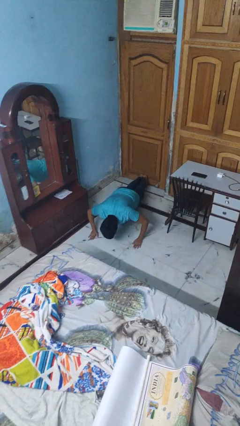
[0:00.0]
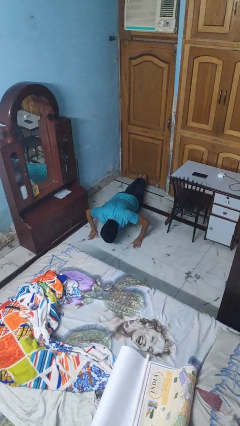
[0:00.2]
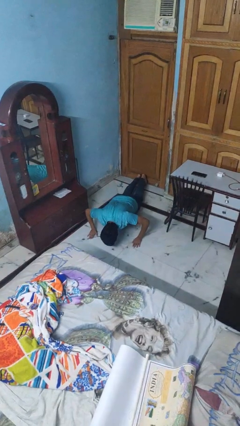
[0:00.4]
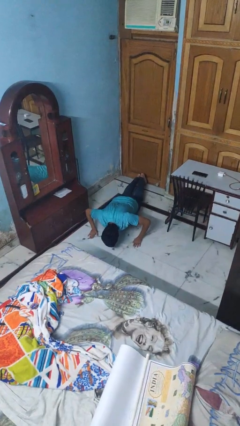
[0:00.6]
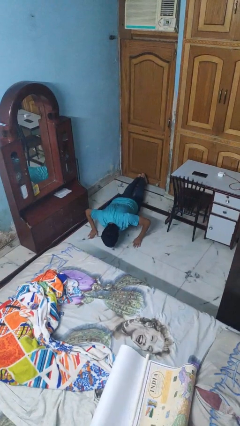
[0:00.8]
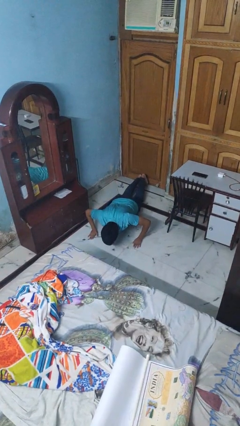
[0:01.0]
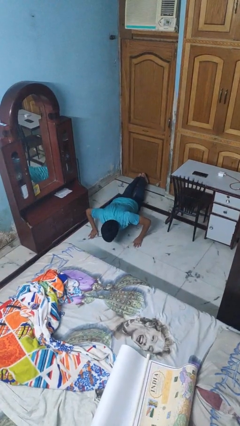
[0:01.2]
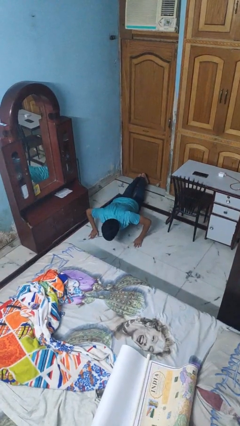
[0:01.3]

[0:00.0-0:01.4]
person exercises with pushup

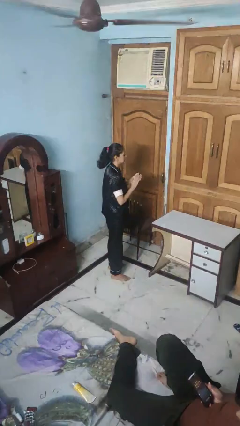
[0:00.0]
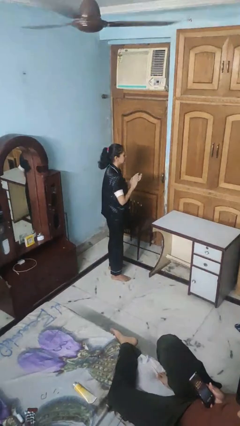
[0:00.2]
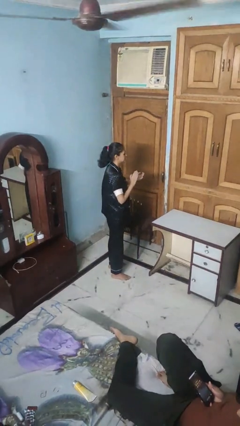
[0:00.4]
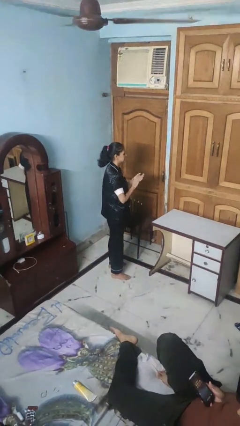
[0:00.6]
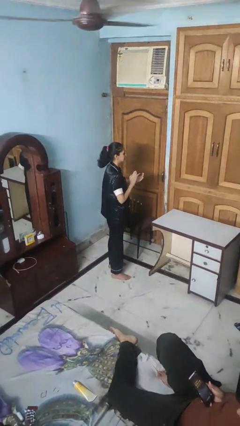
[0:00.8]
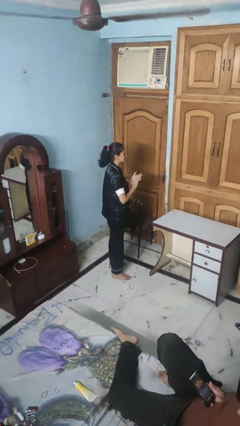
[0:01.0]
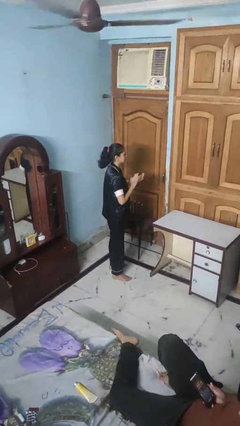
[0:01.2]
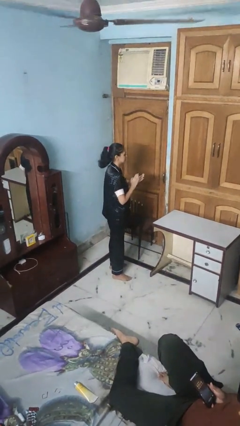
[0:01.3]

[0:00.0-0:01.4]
person claps hands

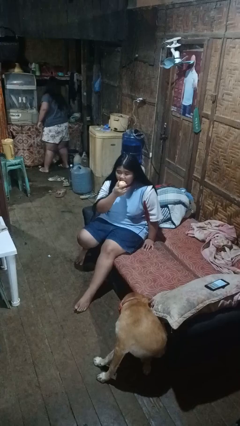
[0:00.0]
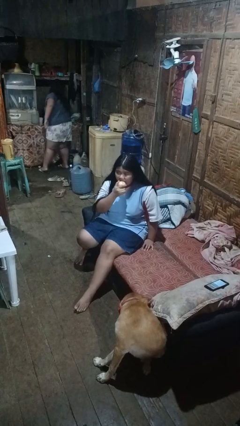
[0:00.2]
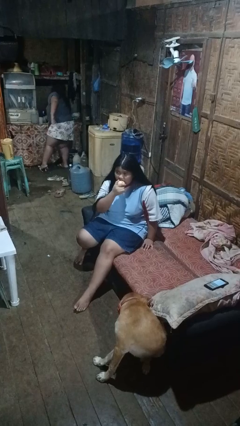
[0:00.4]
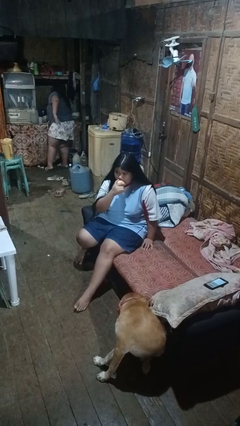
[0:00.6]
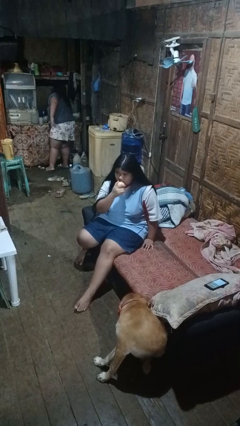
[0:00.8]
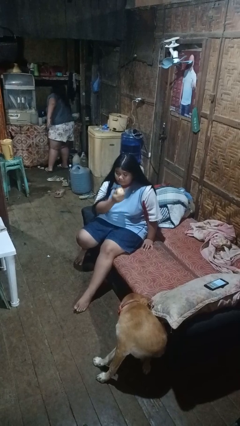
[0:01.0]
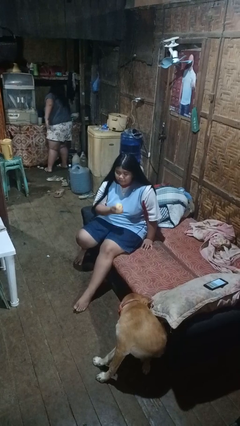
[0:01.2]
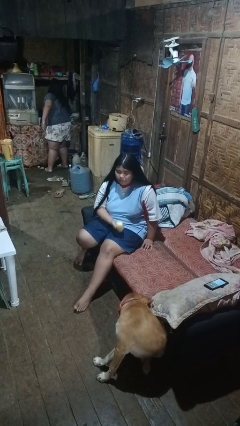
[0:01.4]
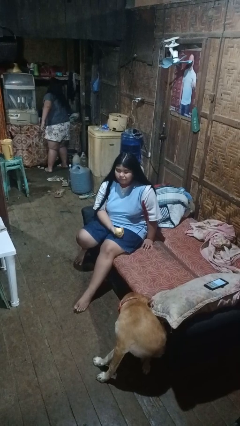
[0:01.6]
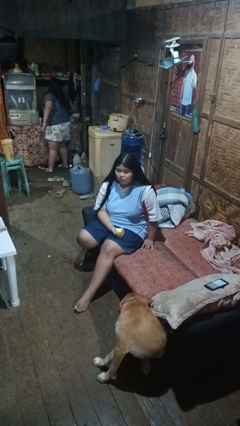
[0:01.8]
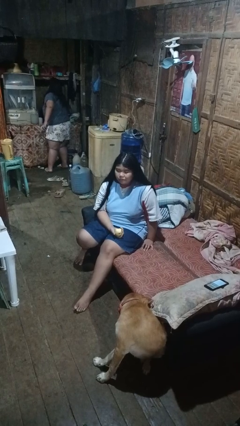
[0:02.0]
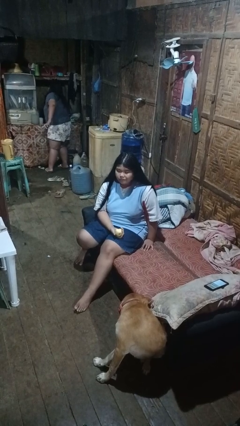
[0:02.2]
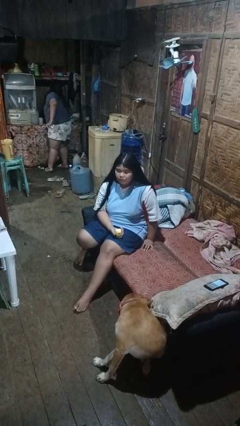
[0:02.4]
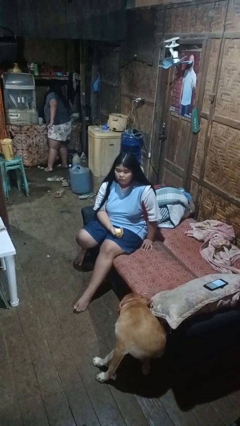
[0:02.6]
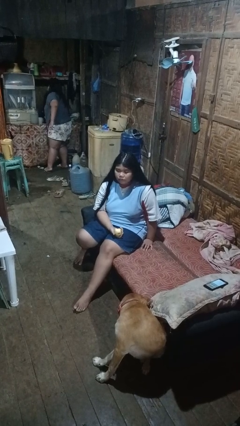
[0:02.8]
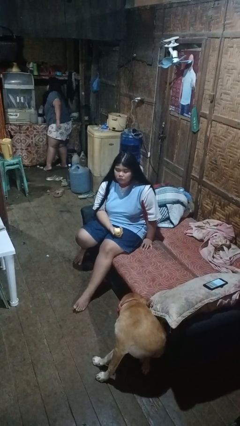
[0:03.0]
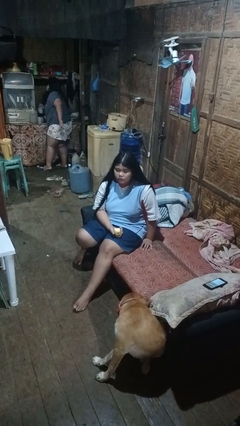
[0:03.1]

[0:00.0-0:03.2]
person eats apple

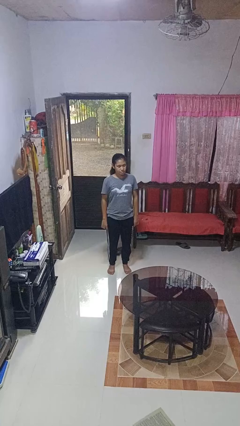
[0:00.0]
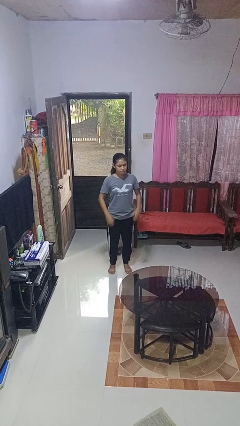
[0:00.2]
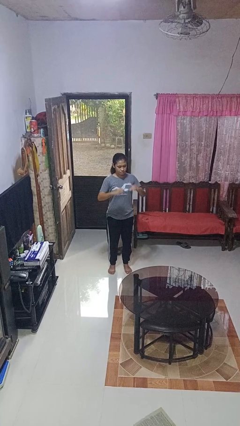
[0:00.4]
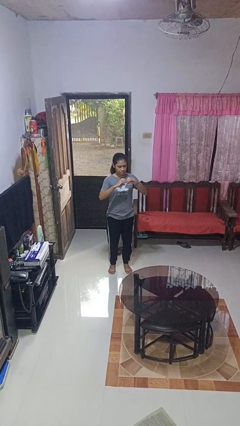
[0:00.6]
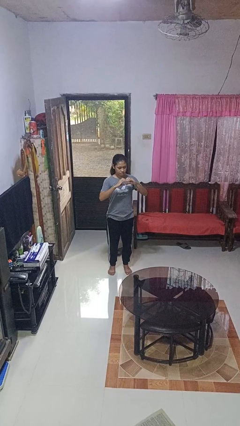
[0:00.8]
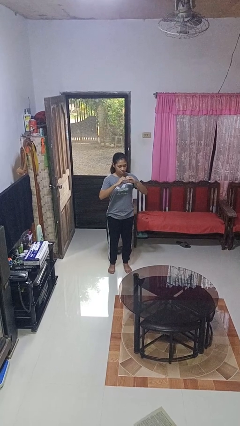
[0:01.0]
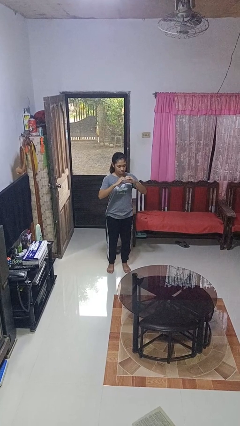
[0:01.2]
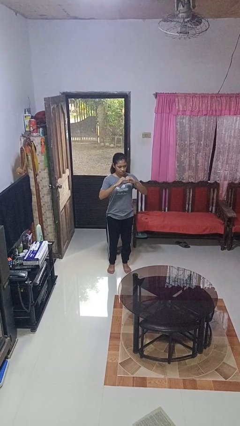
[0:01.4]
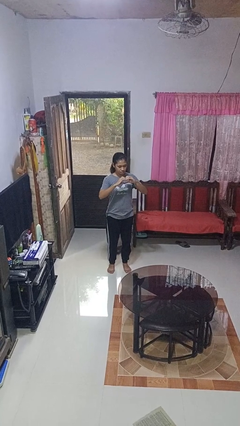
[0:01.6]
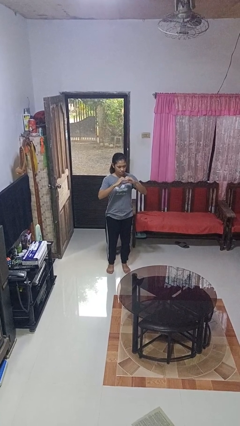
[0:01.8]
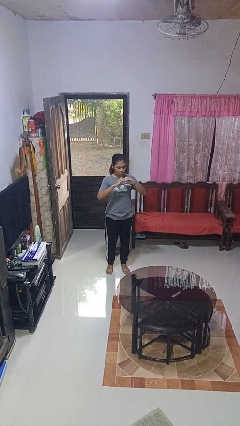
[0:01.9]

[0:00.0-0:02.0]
person gestures heart

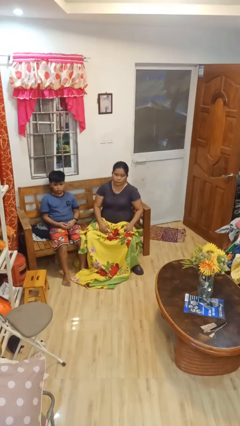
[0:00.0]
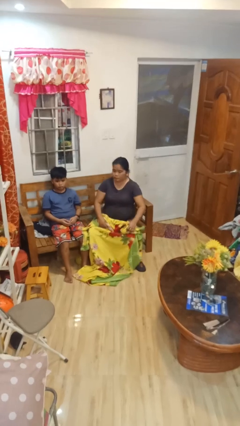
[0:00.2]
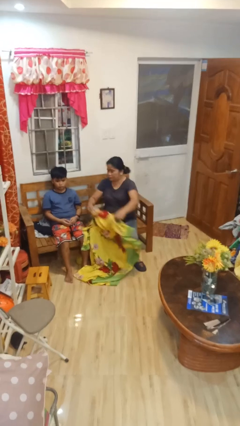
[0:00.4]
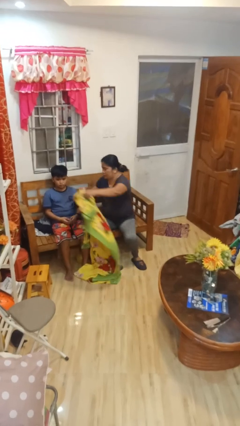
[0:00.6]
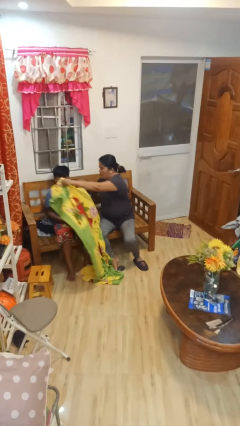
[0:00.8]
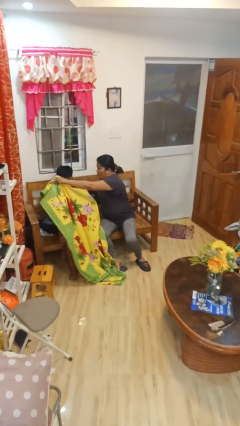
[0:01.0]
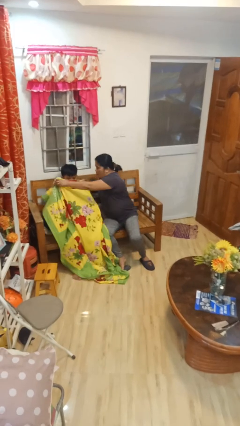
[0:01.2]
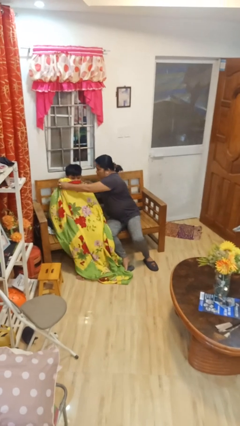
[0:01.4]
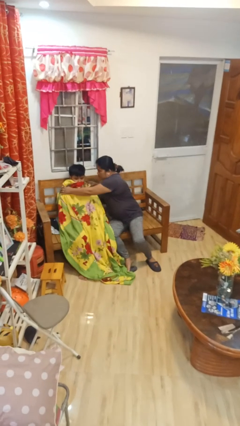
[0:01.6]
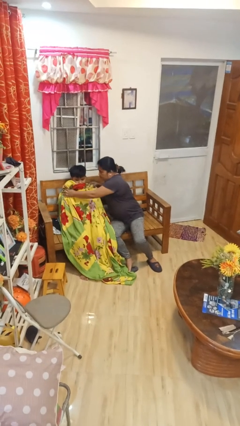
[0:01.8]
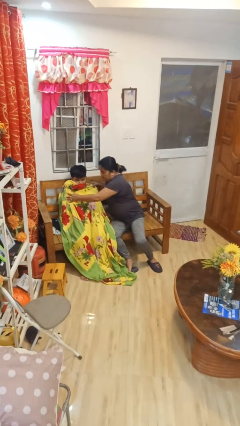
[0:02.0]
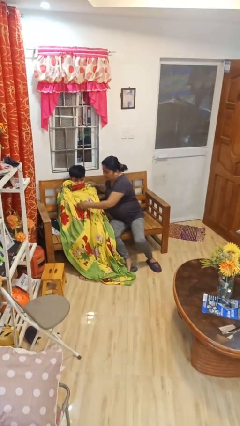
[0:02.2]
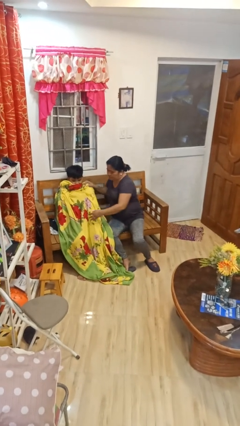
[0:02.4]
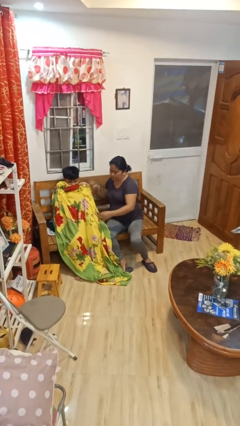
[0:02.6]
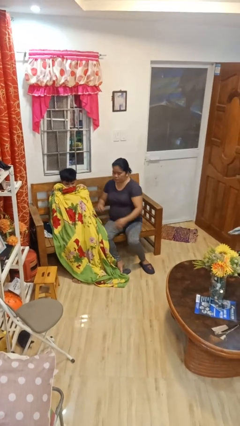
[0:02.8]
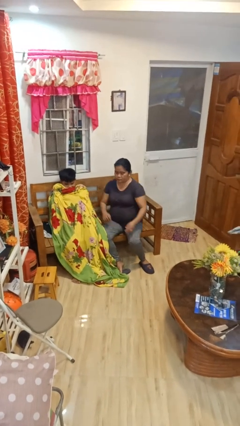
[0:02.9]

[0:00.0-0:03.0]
person covers friend with blanket

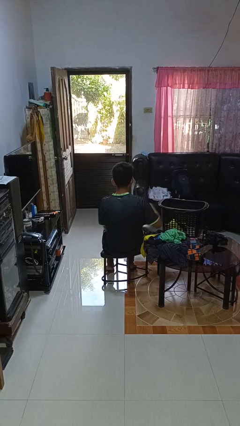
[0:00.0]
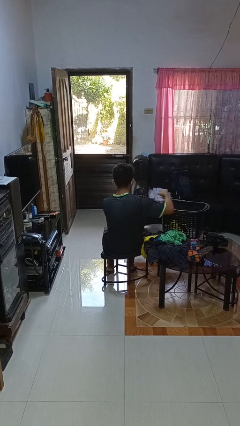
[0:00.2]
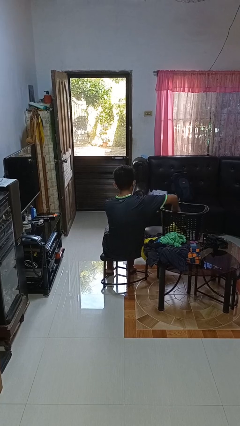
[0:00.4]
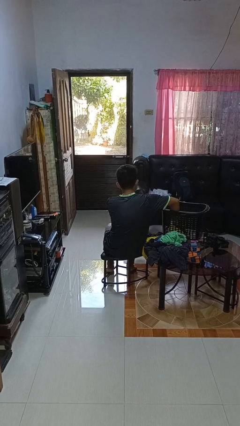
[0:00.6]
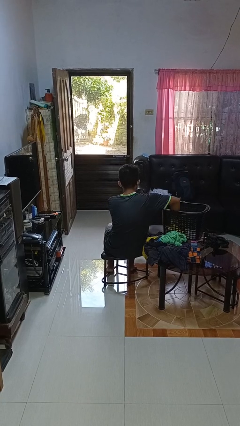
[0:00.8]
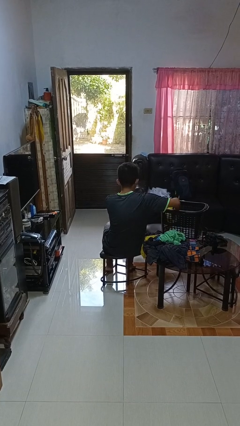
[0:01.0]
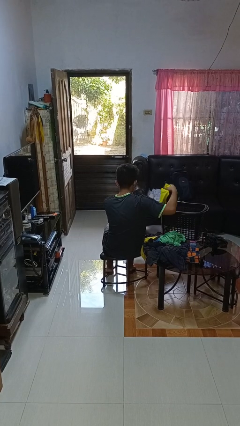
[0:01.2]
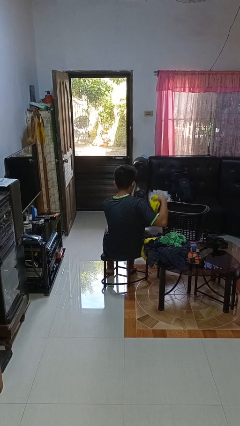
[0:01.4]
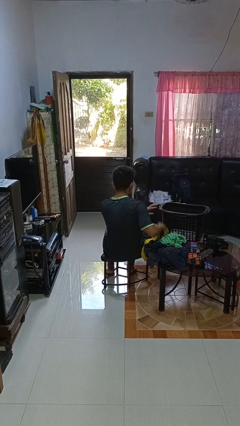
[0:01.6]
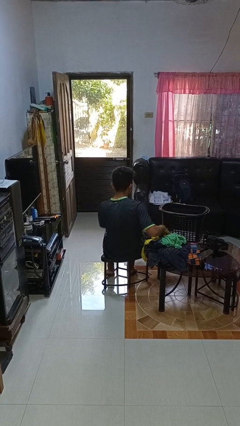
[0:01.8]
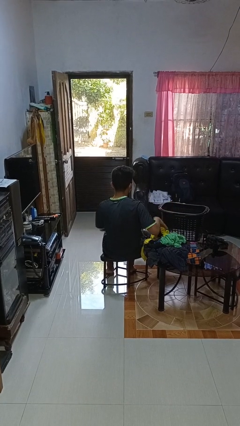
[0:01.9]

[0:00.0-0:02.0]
person takes object from basket

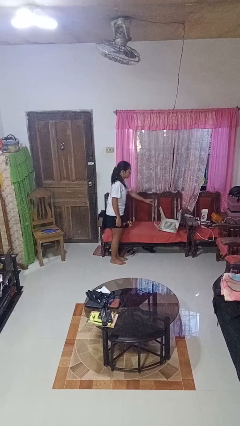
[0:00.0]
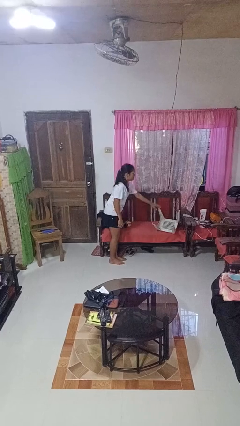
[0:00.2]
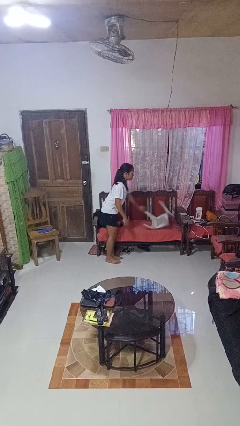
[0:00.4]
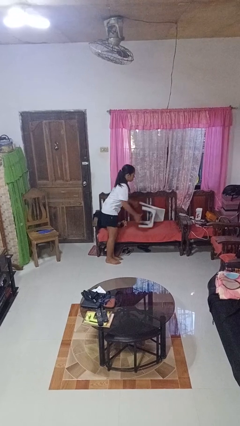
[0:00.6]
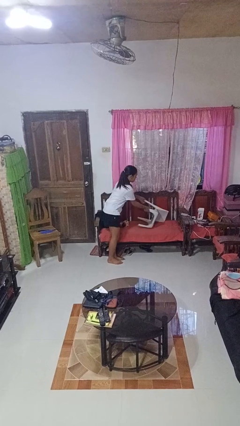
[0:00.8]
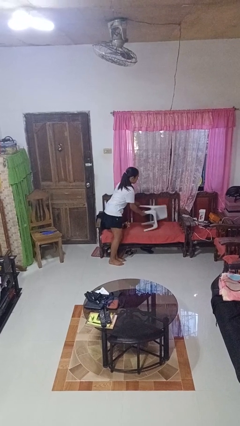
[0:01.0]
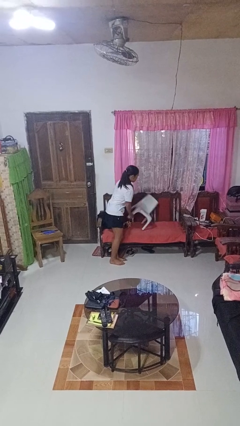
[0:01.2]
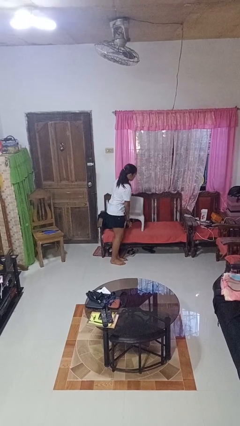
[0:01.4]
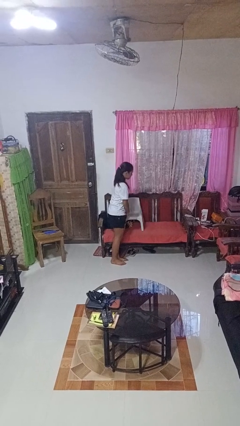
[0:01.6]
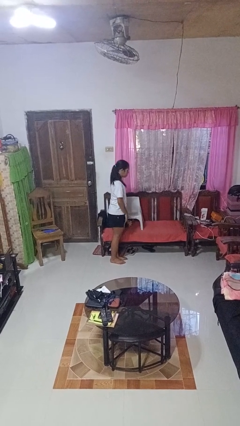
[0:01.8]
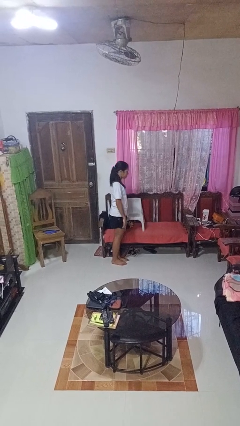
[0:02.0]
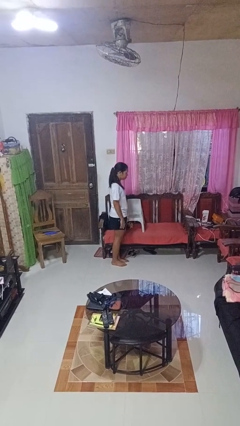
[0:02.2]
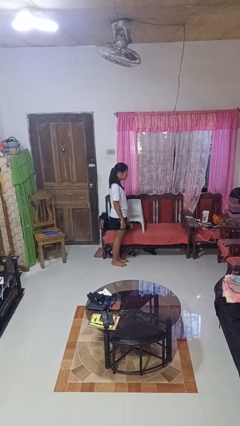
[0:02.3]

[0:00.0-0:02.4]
person sets upright furniture

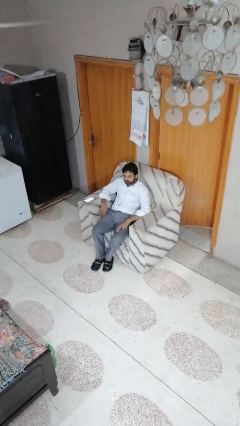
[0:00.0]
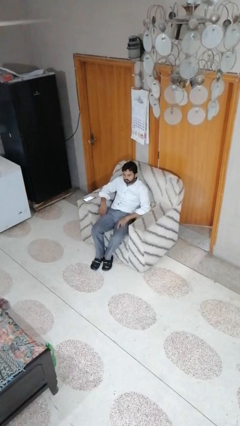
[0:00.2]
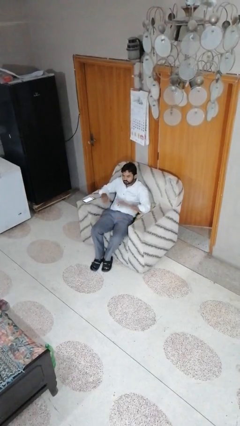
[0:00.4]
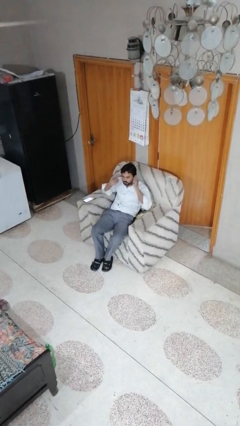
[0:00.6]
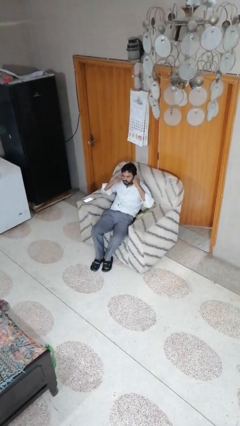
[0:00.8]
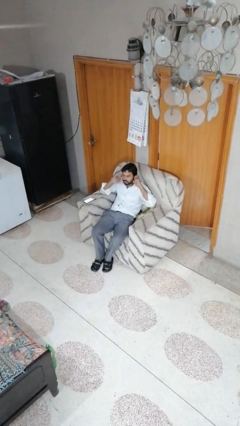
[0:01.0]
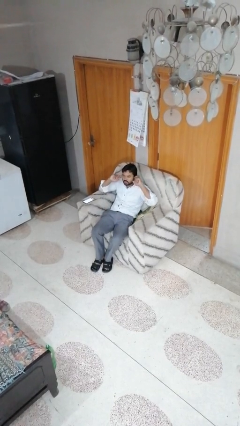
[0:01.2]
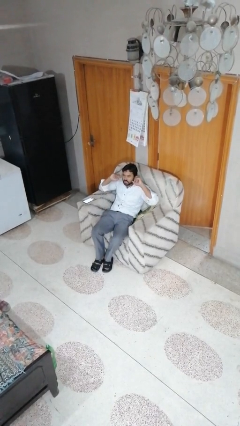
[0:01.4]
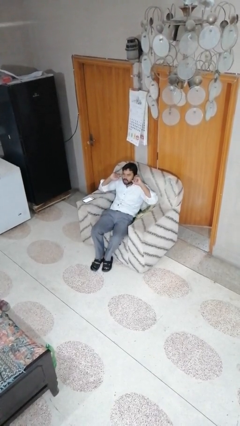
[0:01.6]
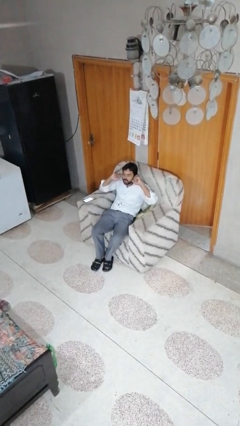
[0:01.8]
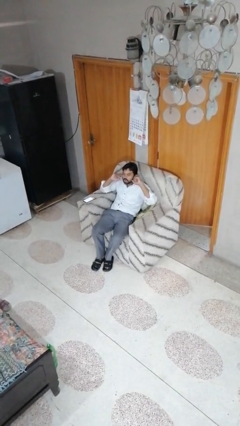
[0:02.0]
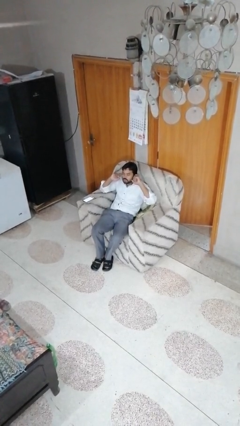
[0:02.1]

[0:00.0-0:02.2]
person puts fingers in ear
